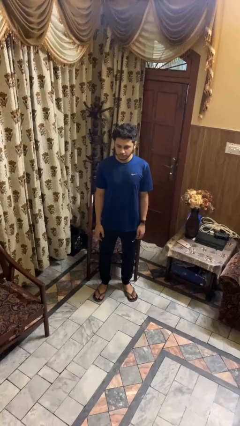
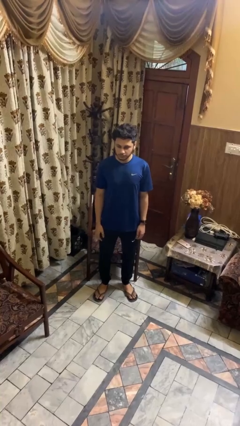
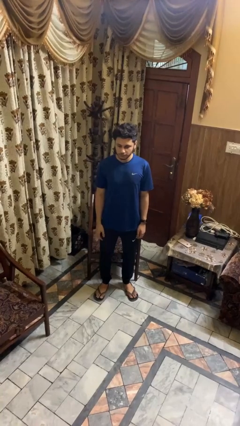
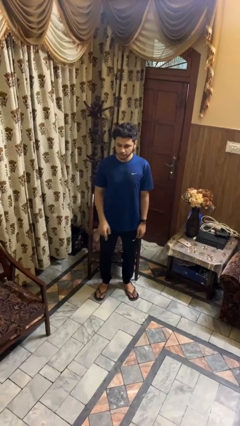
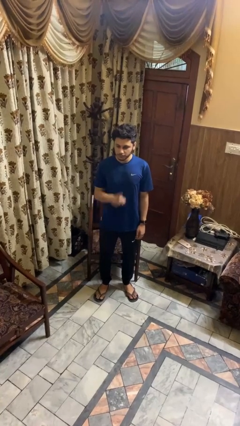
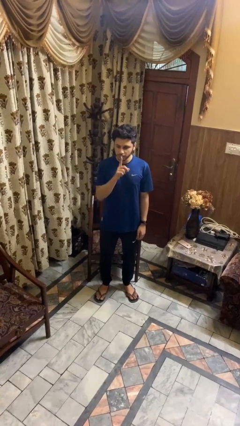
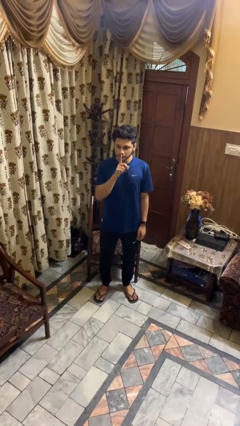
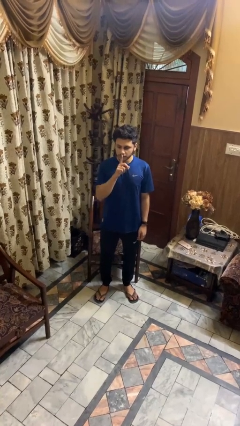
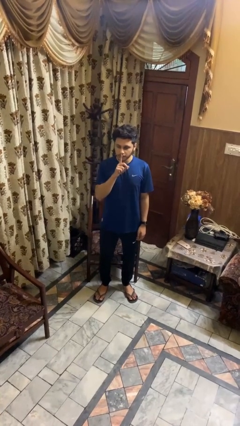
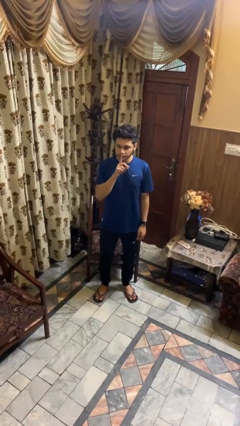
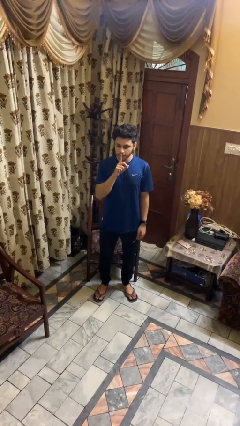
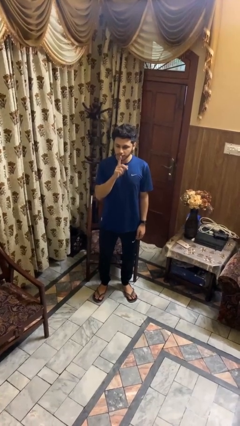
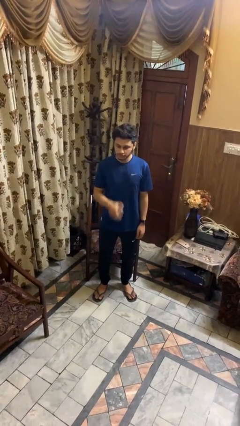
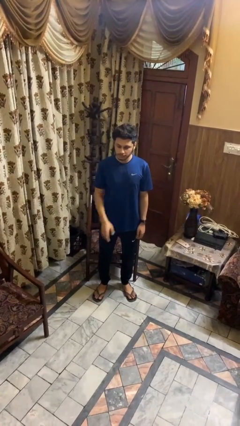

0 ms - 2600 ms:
person gestures be quiet

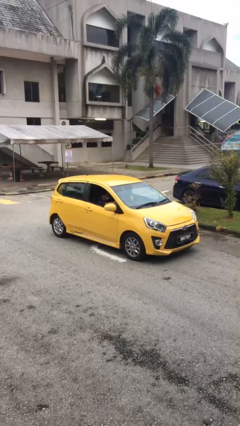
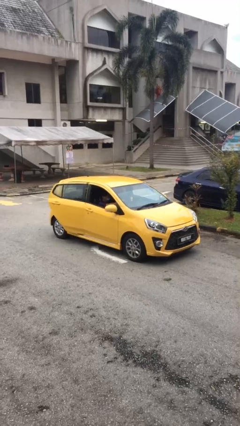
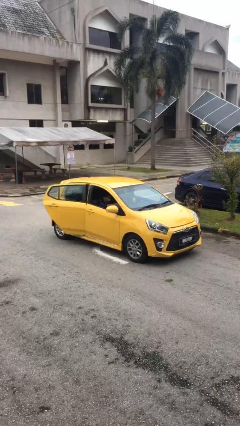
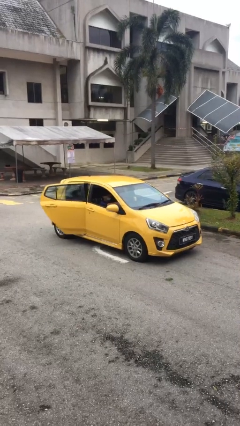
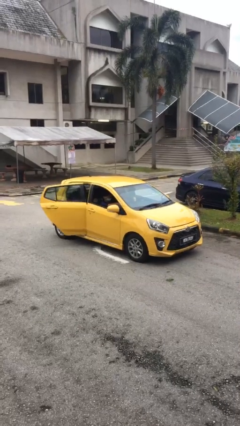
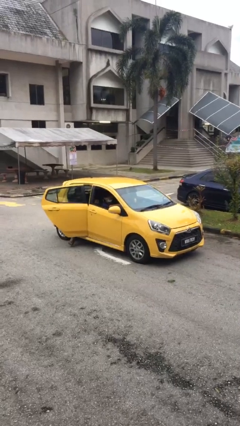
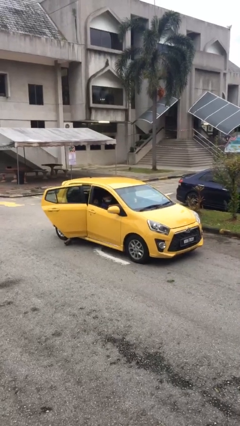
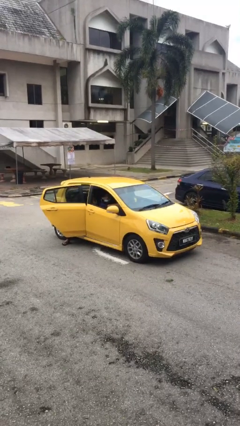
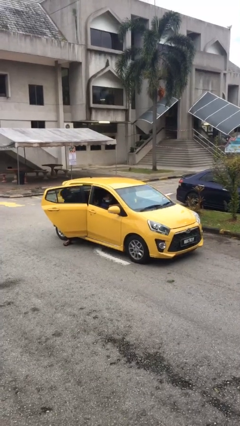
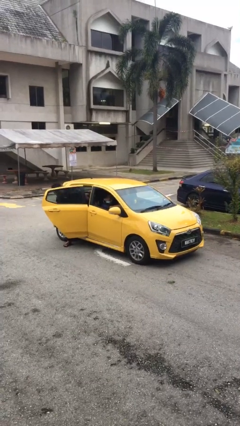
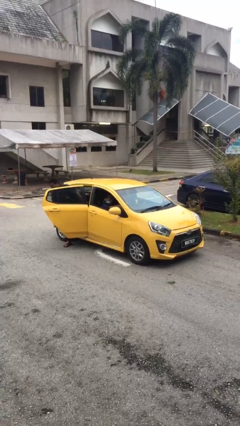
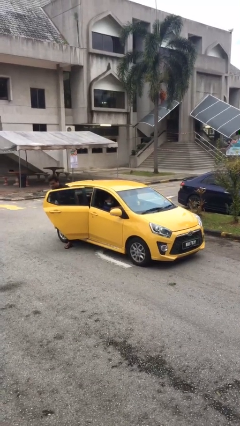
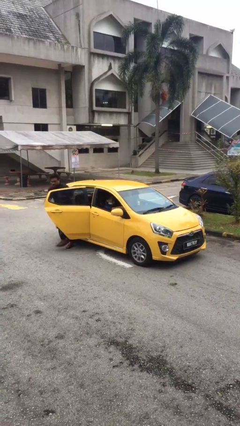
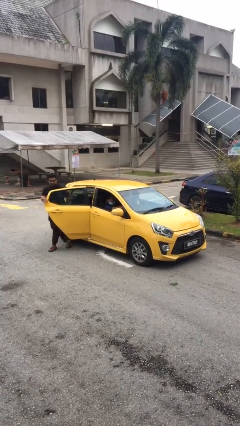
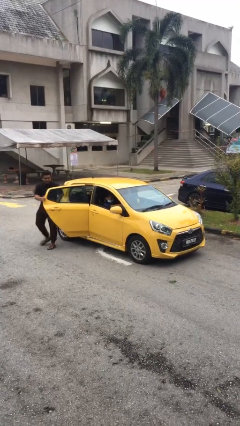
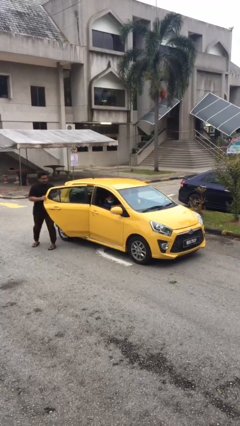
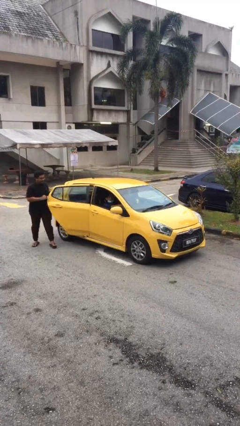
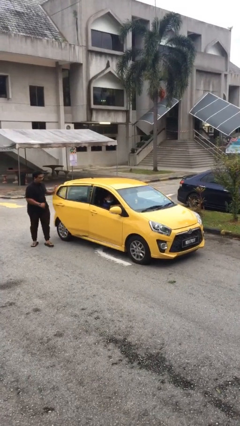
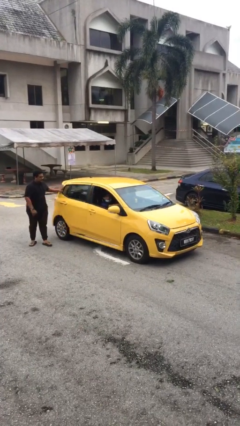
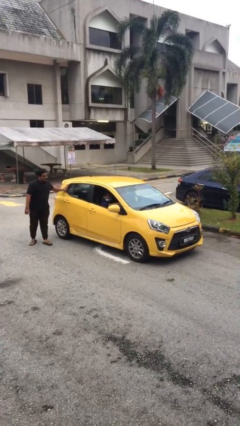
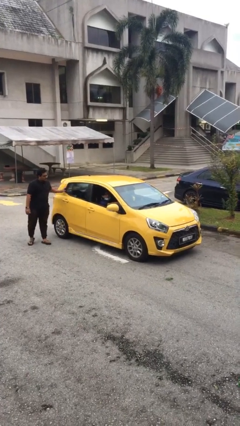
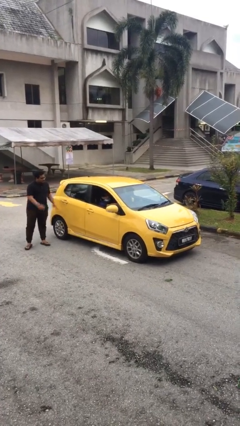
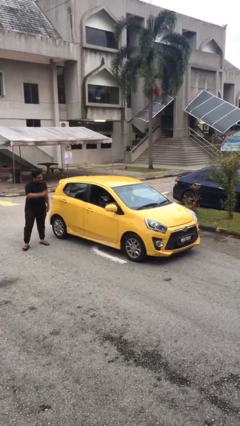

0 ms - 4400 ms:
car drops off person

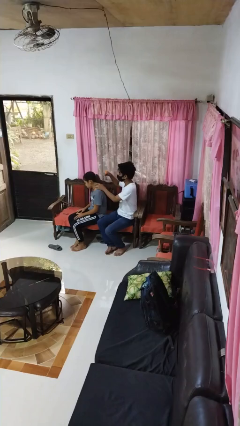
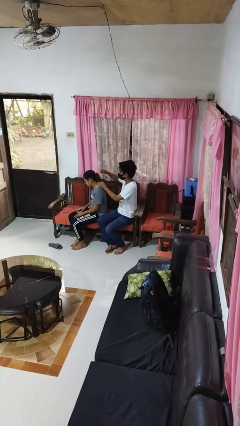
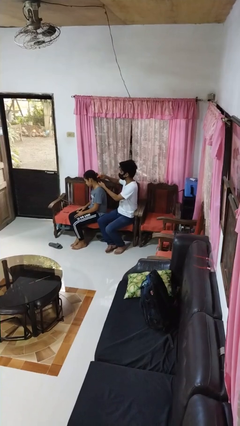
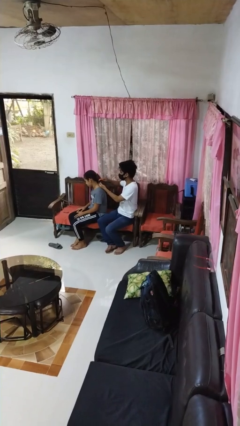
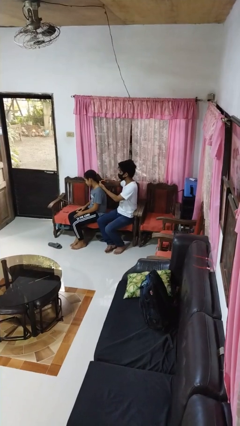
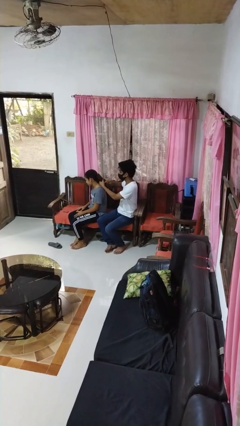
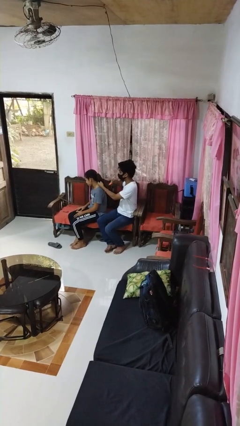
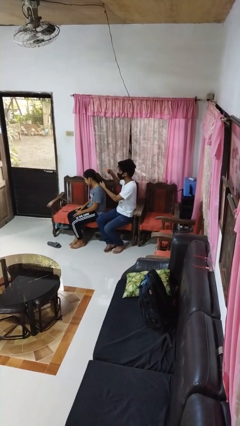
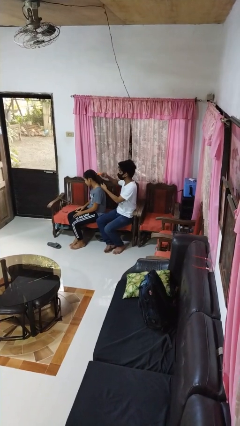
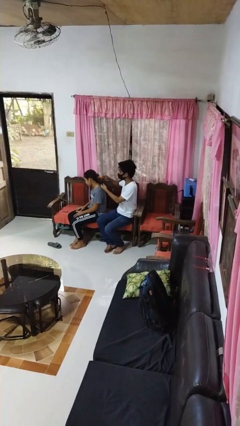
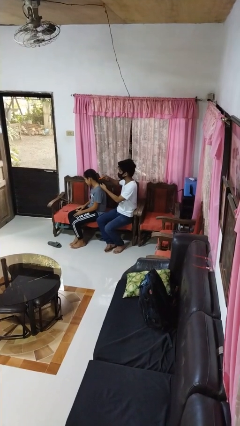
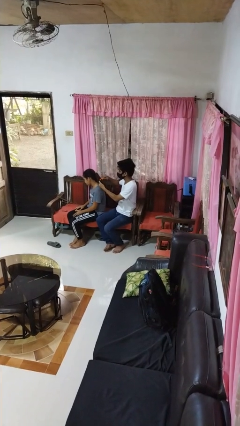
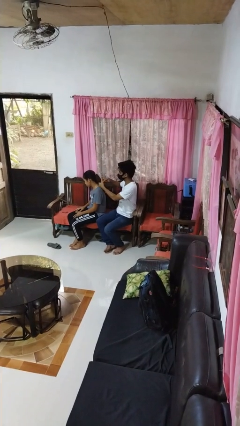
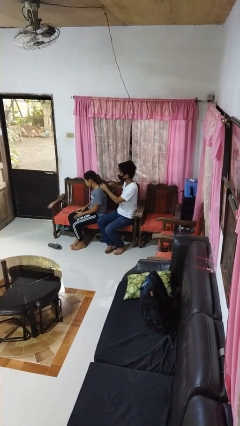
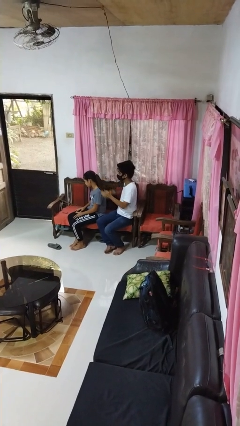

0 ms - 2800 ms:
person brushes hair of person

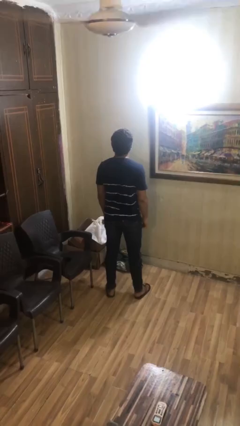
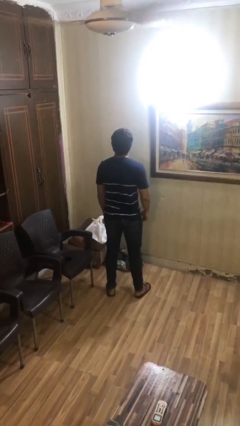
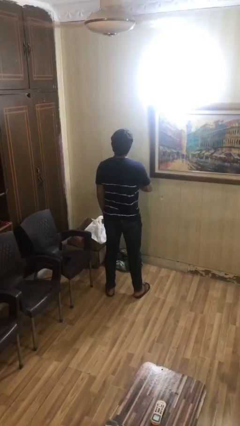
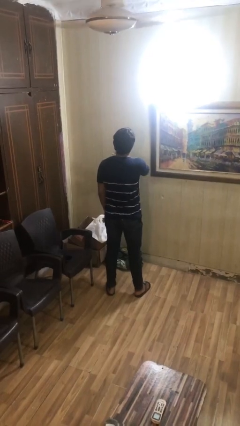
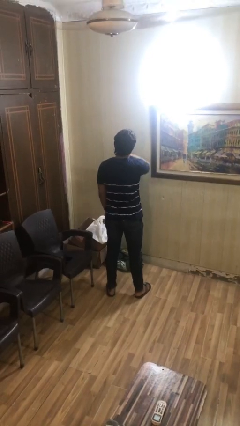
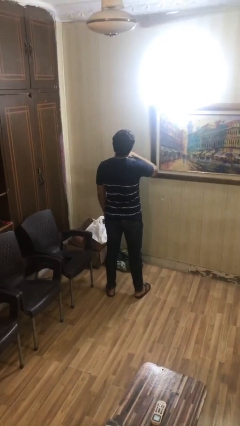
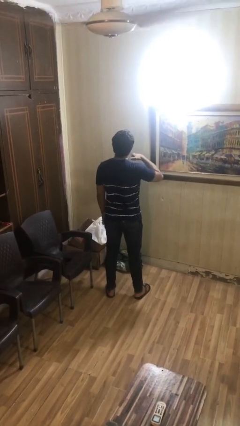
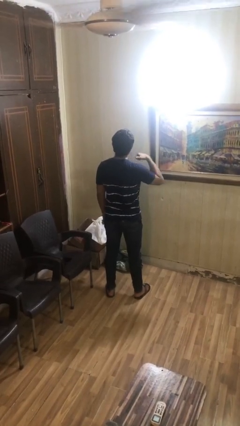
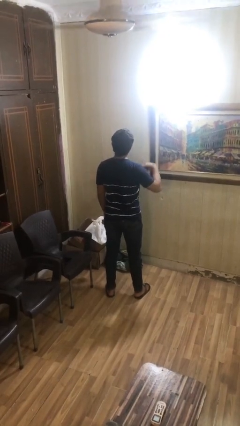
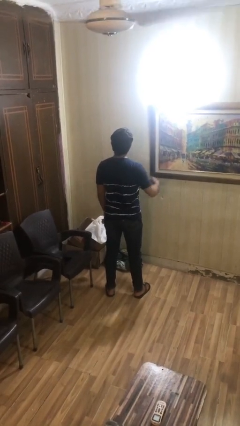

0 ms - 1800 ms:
person gestures cut

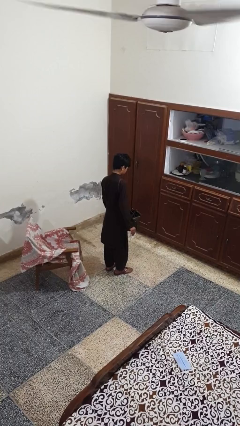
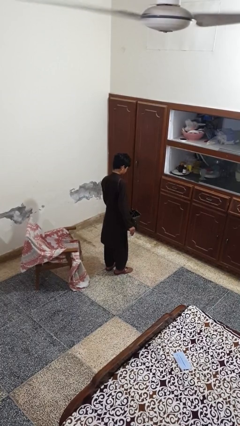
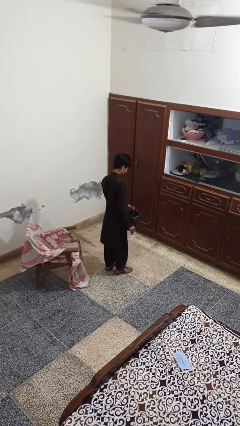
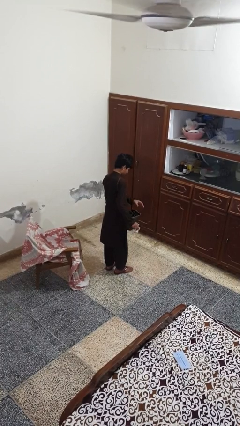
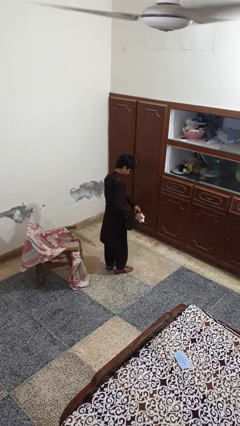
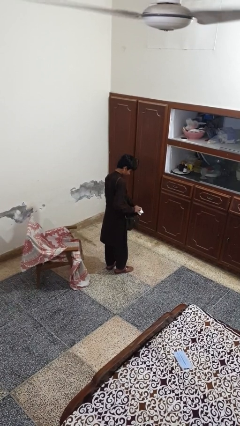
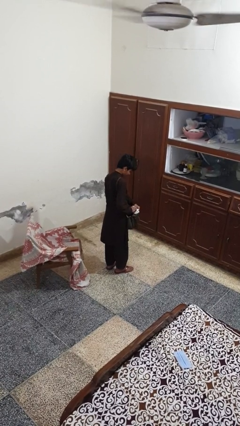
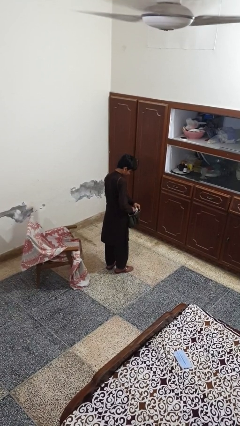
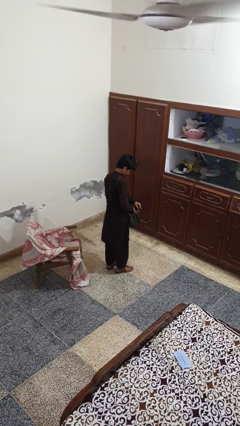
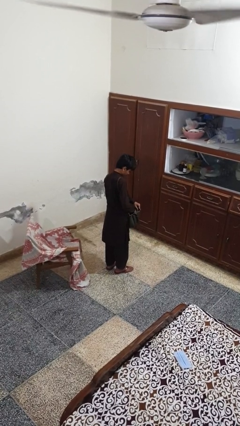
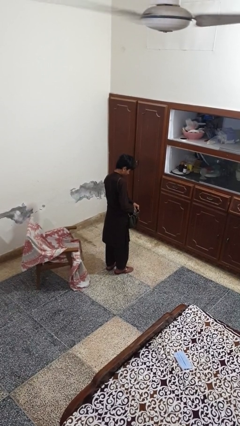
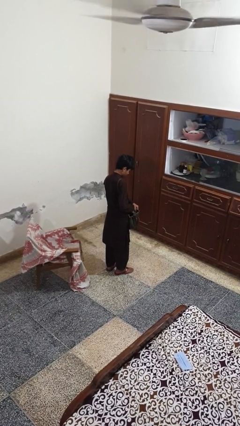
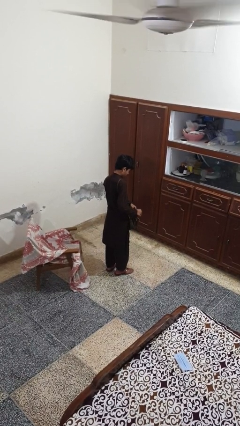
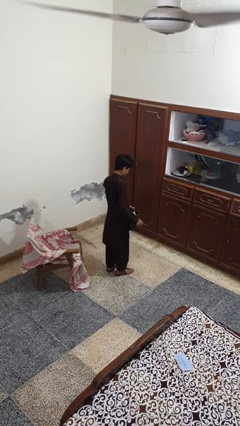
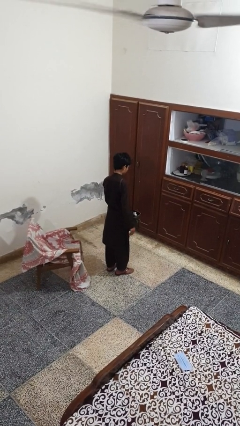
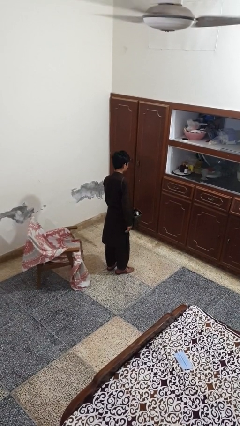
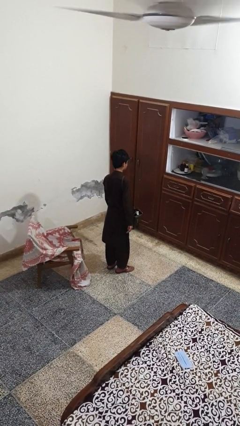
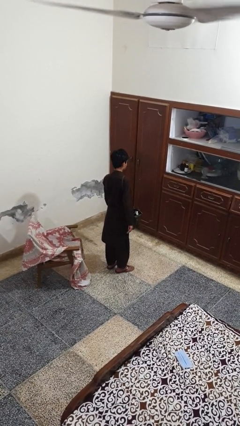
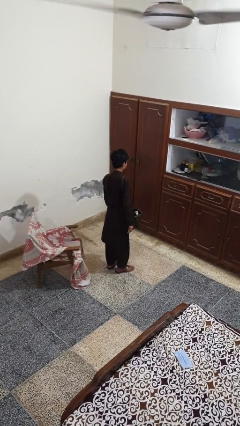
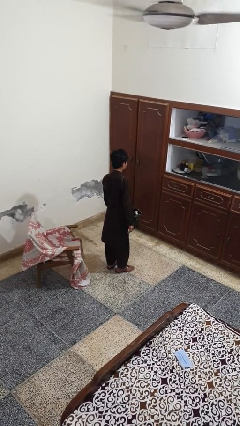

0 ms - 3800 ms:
person puts object into purse

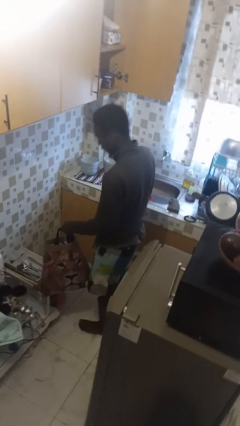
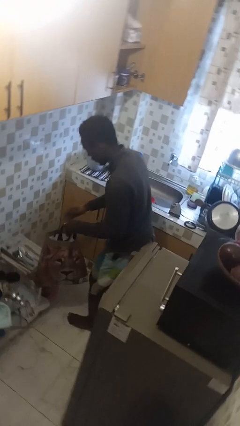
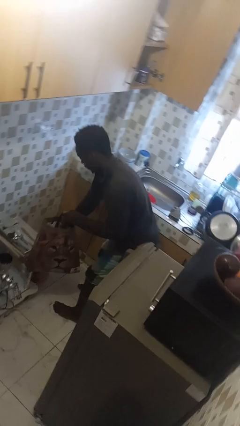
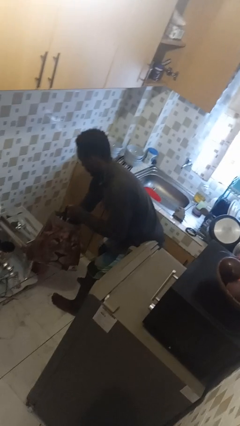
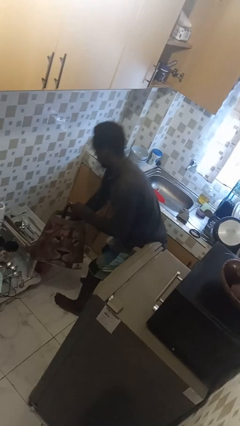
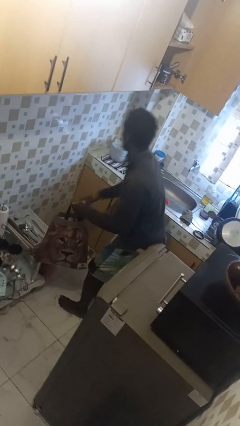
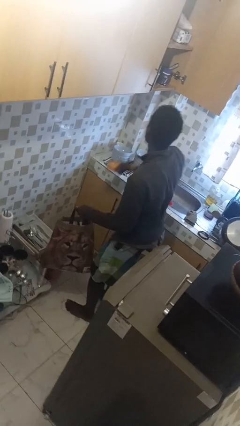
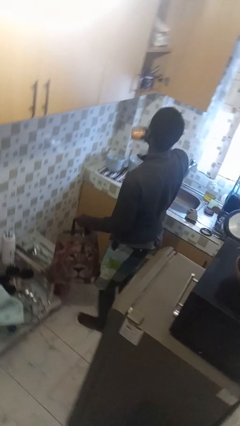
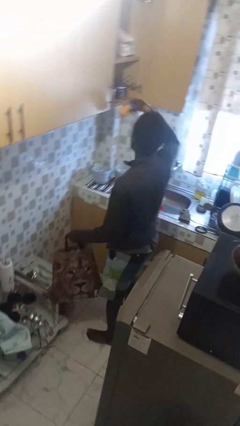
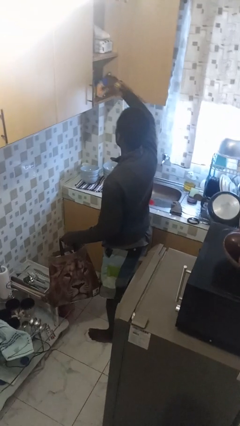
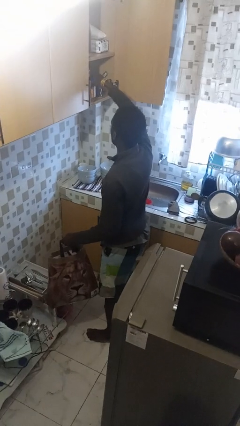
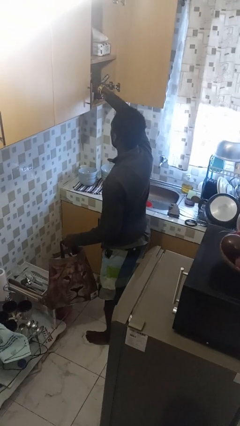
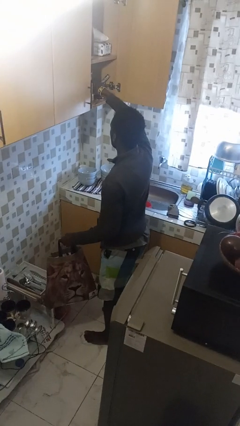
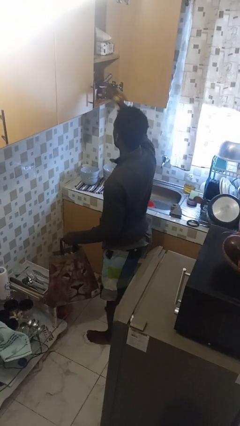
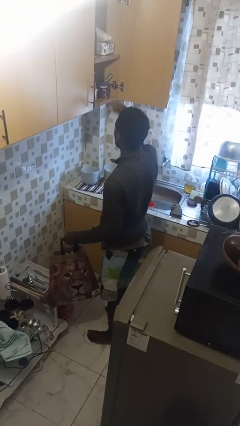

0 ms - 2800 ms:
person loads groceries into cabinet
